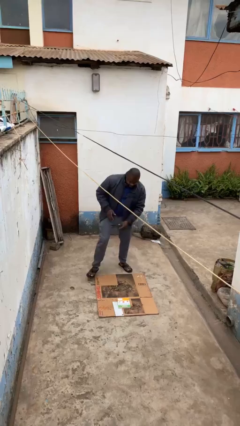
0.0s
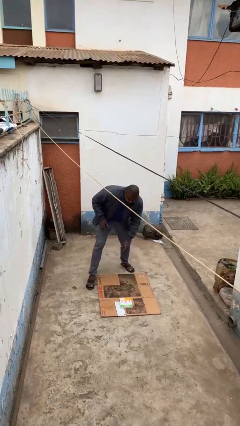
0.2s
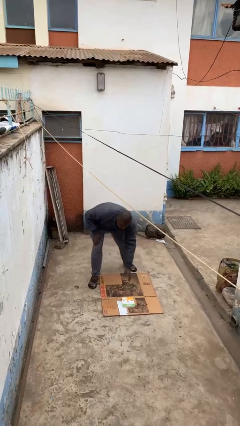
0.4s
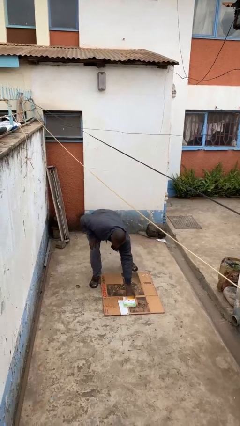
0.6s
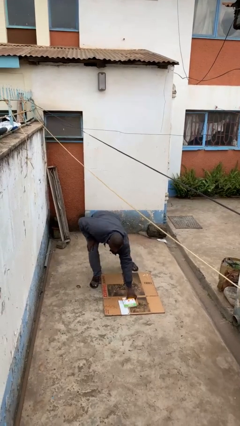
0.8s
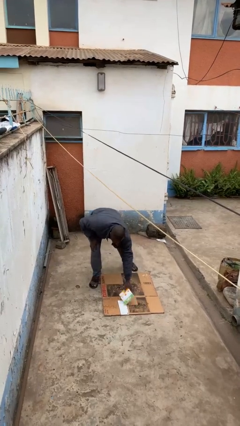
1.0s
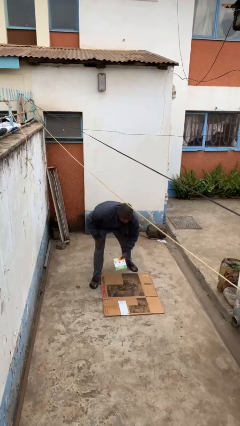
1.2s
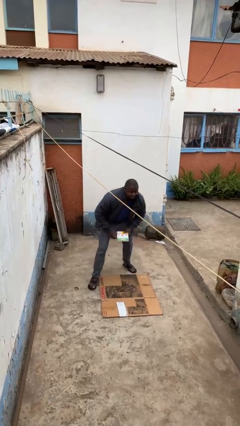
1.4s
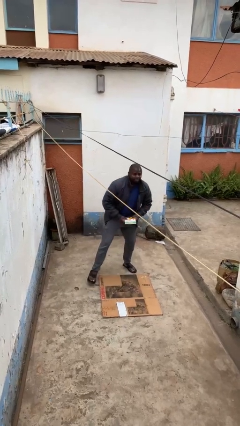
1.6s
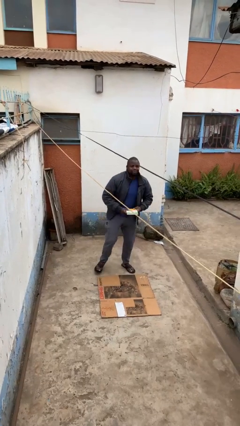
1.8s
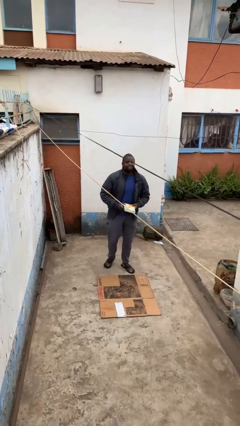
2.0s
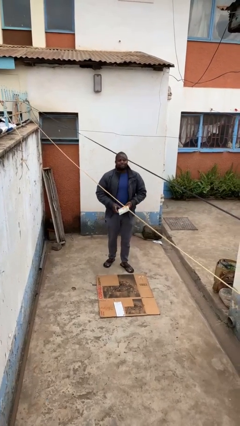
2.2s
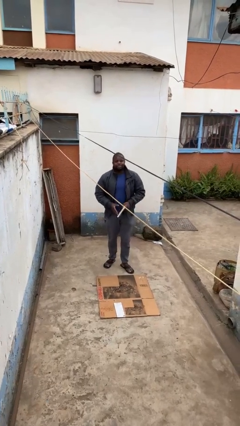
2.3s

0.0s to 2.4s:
person picks up object from floor

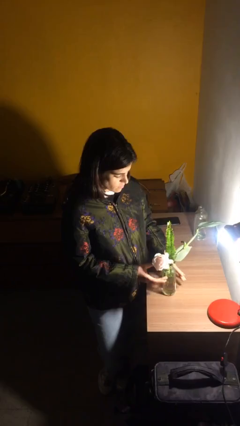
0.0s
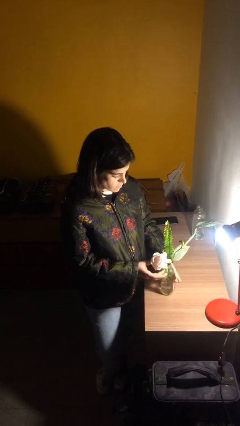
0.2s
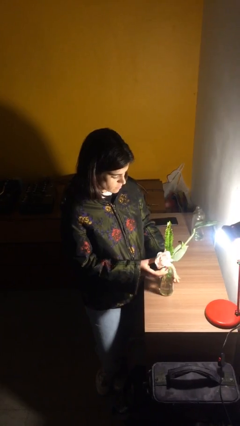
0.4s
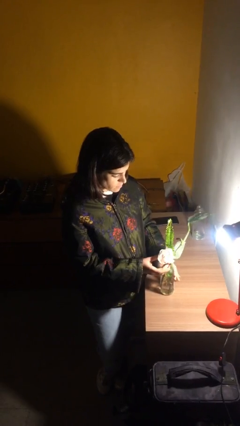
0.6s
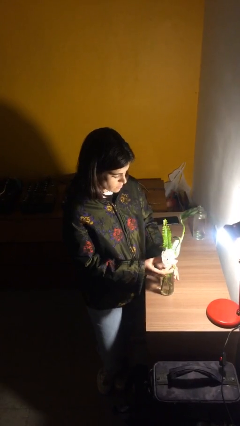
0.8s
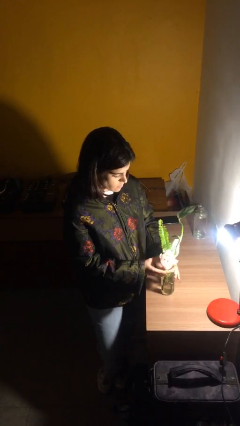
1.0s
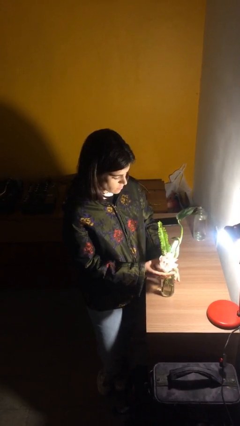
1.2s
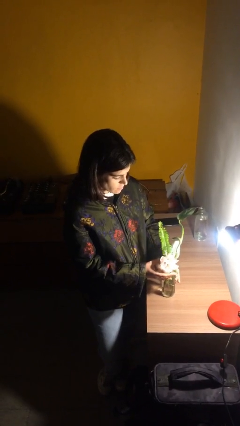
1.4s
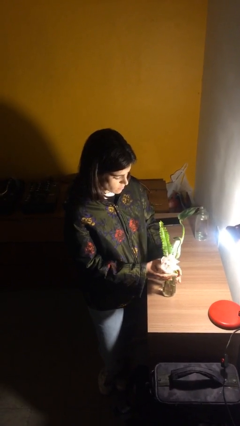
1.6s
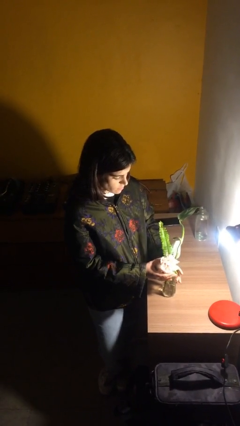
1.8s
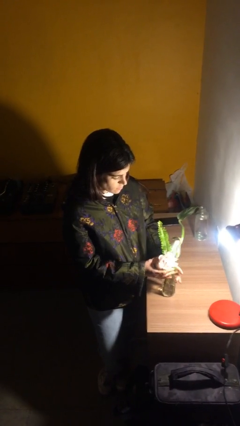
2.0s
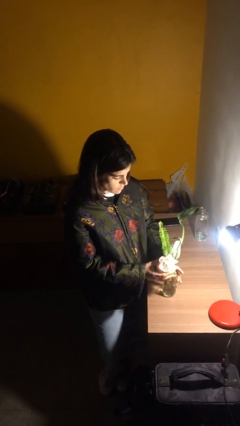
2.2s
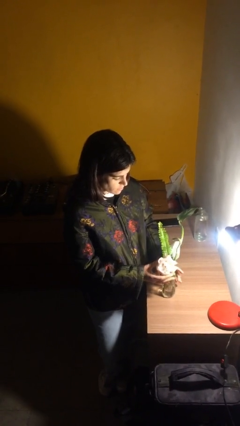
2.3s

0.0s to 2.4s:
person arranges flowers in vase

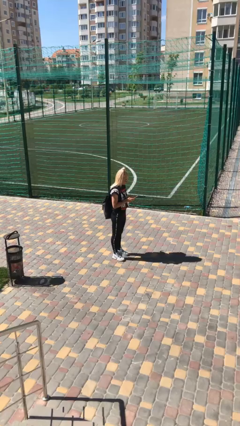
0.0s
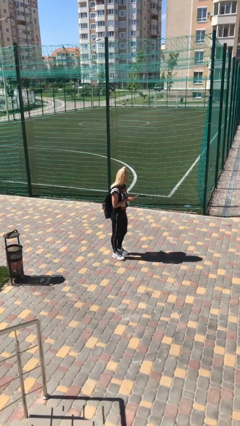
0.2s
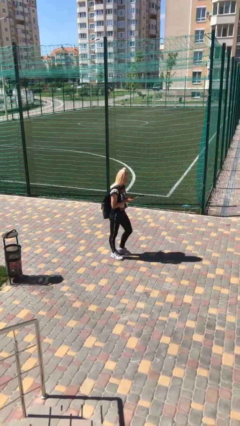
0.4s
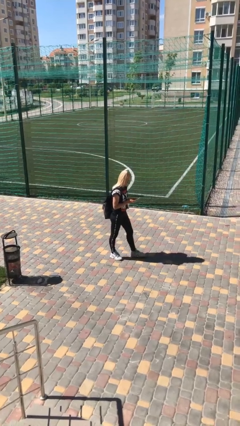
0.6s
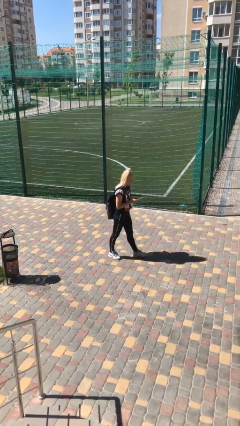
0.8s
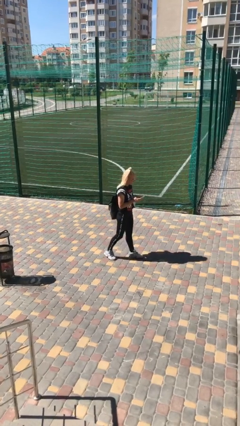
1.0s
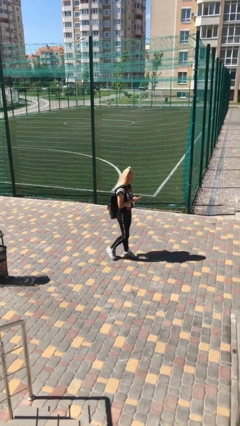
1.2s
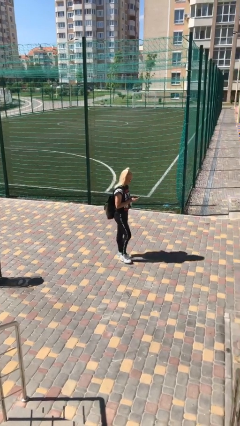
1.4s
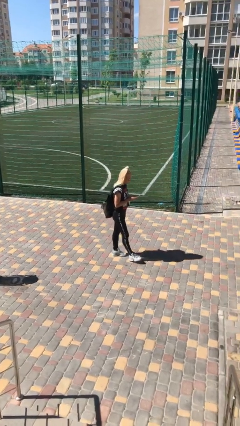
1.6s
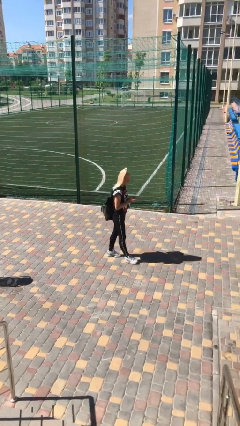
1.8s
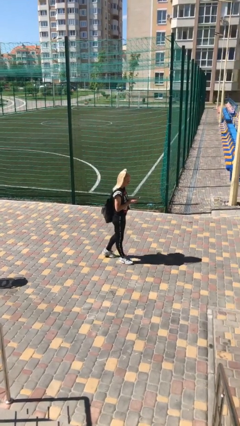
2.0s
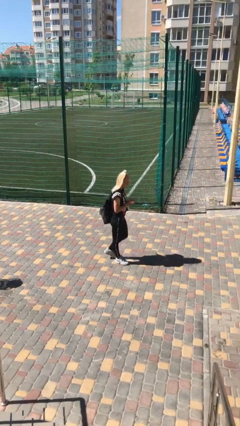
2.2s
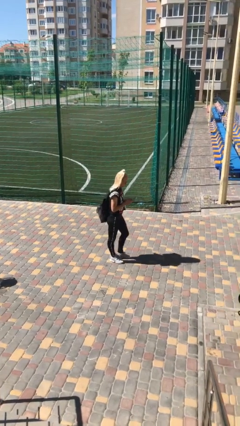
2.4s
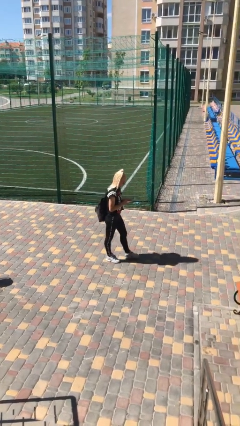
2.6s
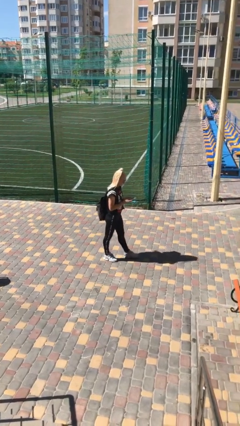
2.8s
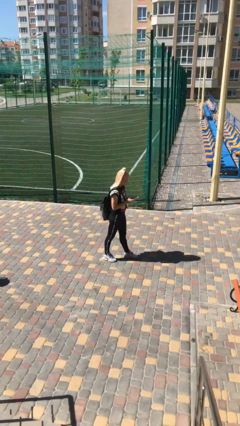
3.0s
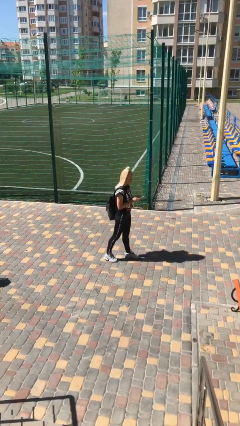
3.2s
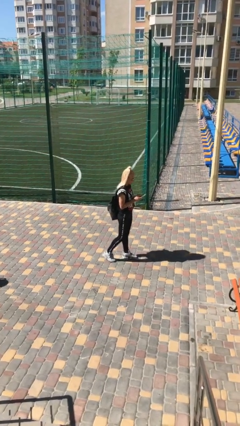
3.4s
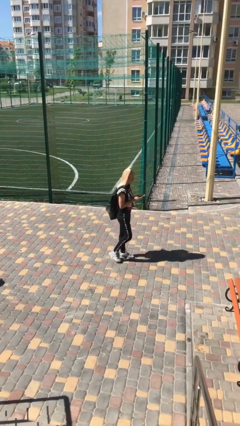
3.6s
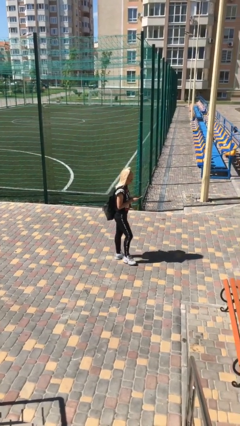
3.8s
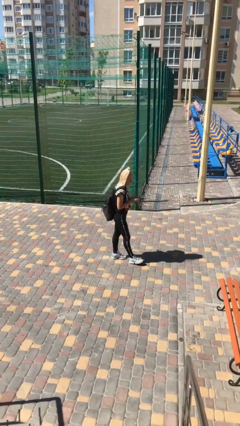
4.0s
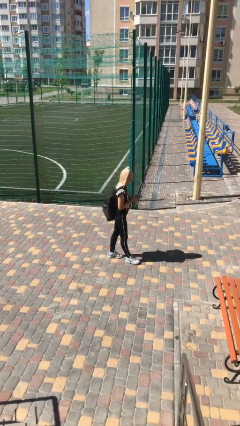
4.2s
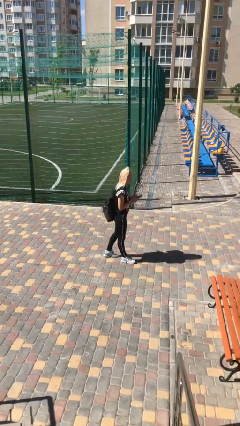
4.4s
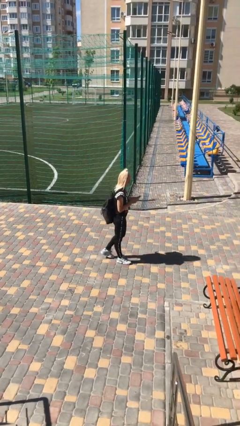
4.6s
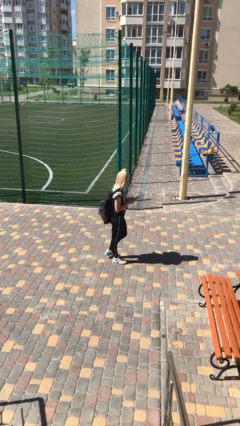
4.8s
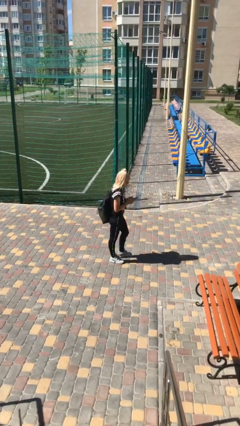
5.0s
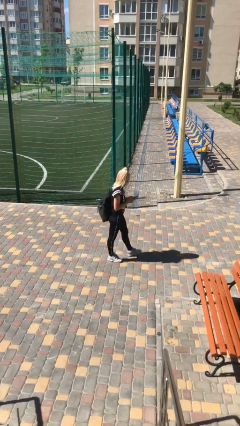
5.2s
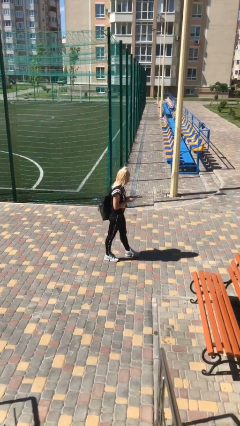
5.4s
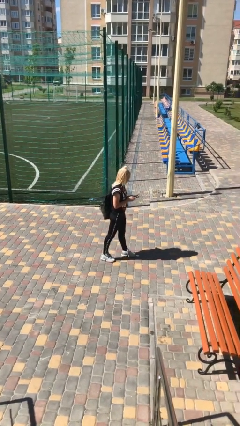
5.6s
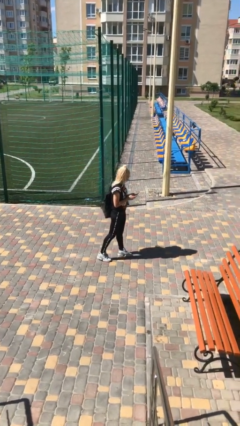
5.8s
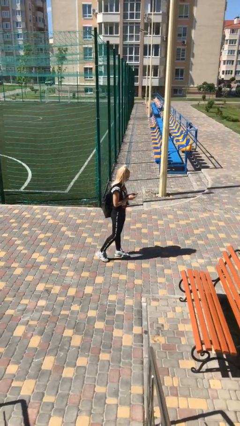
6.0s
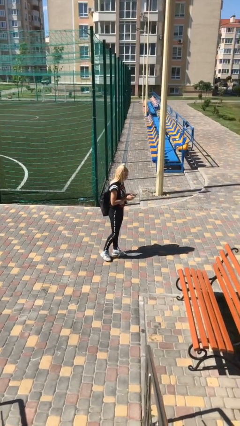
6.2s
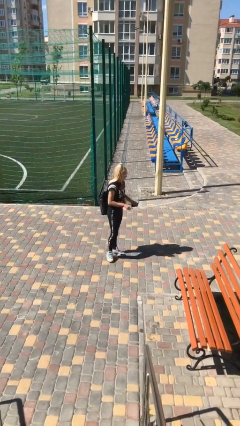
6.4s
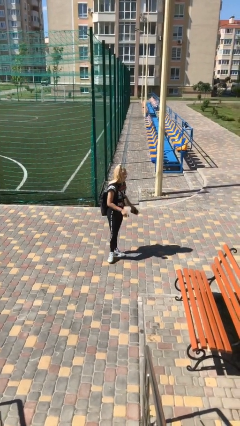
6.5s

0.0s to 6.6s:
person texts on phone

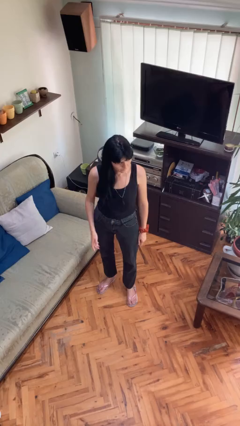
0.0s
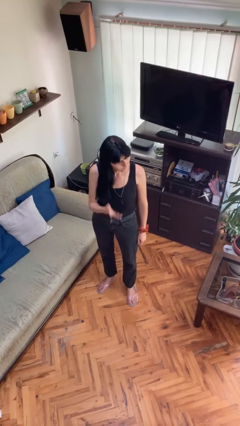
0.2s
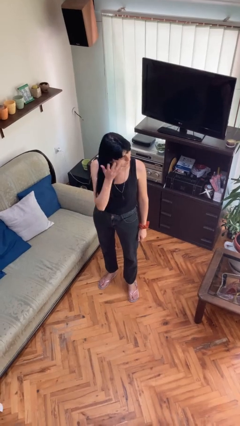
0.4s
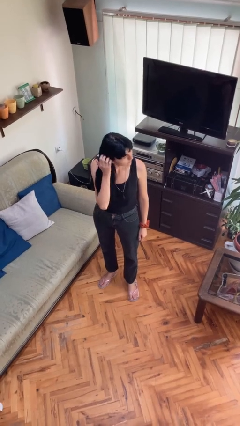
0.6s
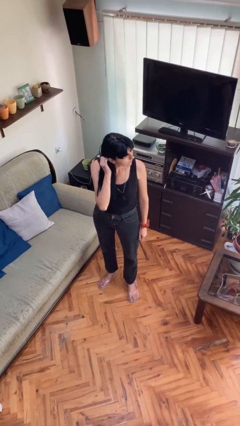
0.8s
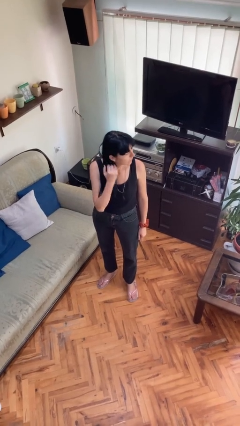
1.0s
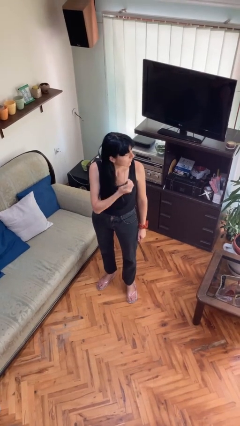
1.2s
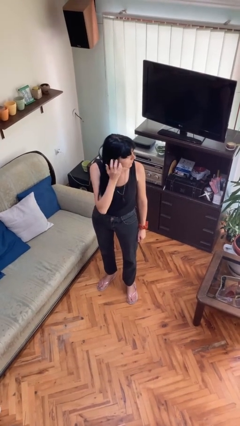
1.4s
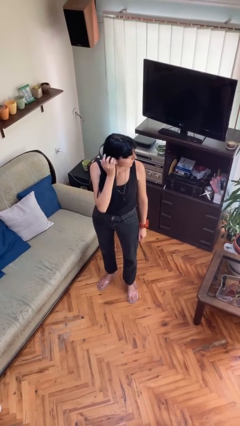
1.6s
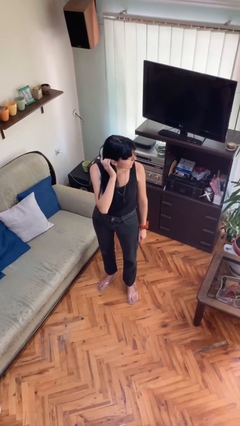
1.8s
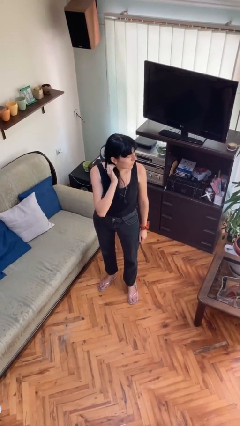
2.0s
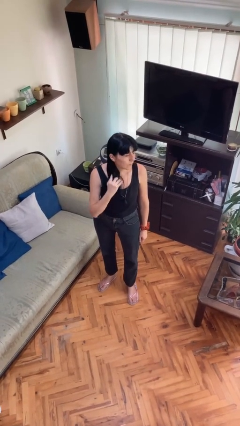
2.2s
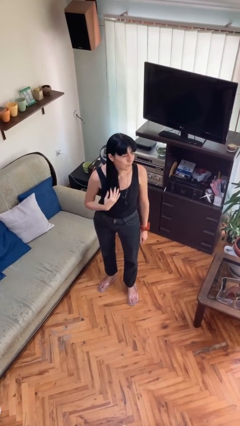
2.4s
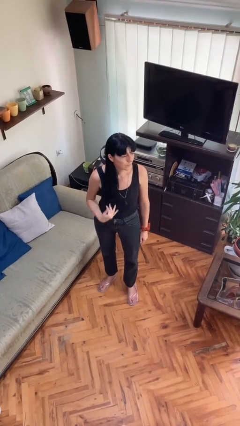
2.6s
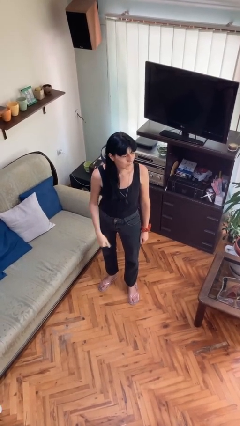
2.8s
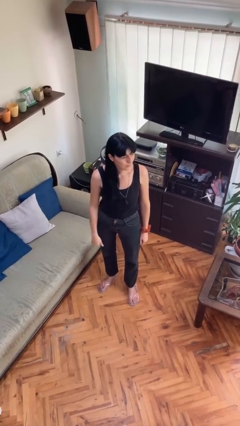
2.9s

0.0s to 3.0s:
person strokes hair

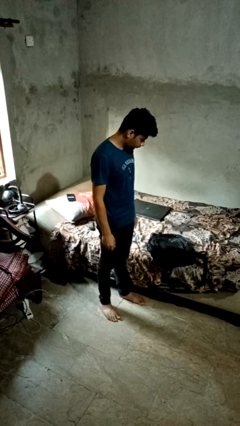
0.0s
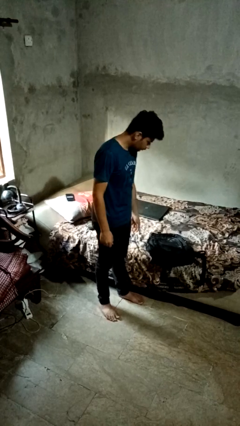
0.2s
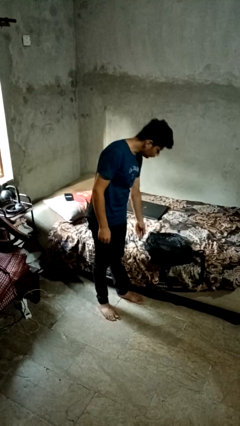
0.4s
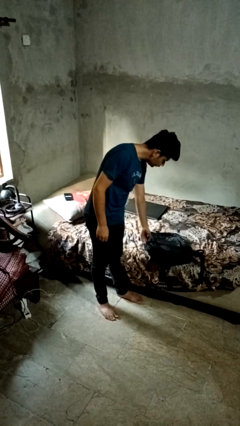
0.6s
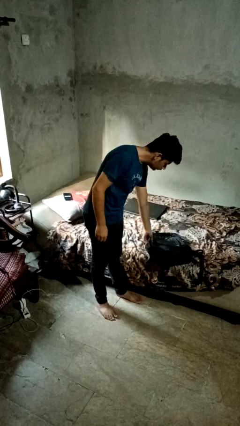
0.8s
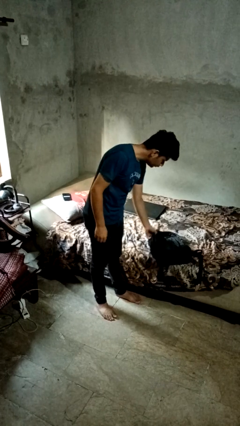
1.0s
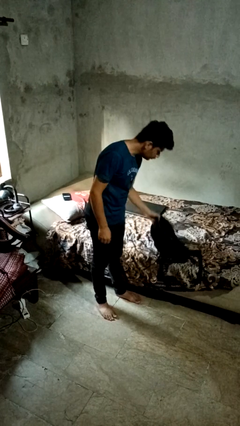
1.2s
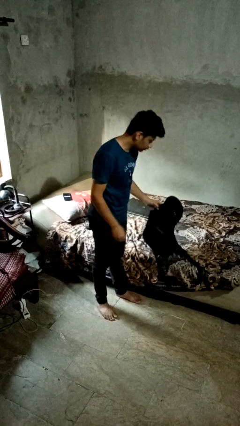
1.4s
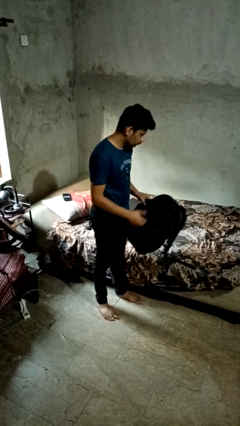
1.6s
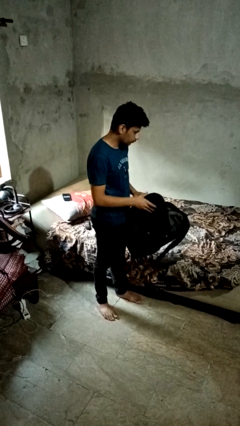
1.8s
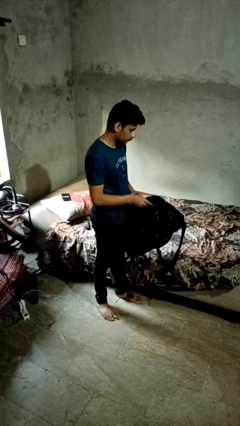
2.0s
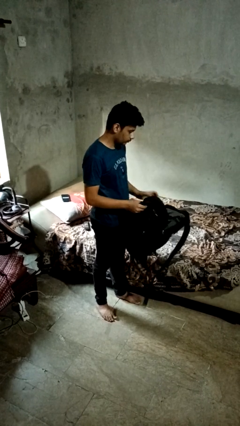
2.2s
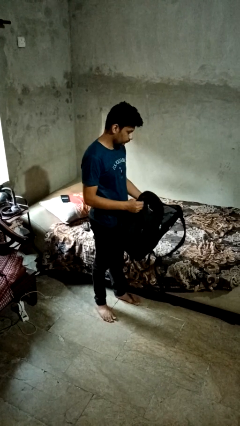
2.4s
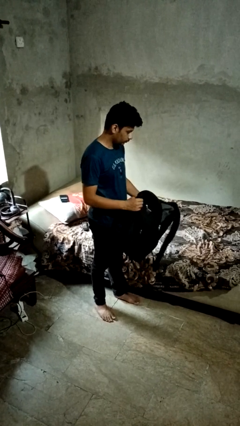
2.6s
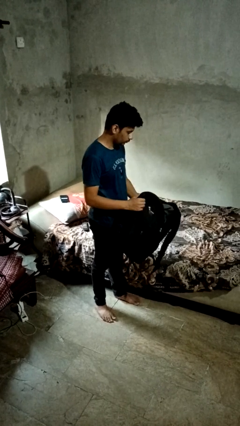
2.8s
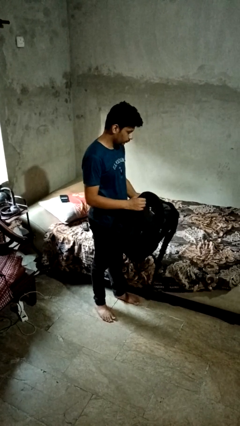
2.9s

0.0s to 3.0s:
person picks up object from bed

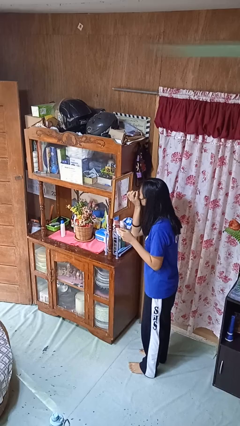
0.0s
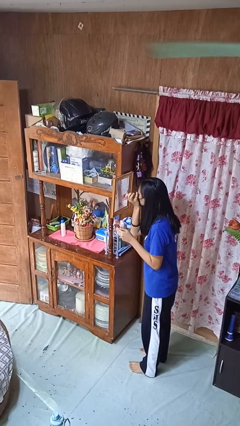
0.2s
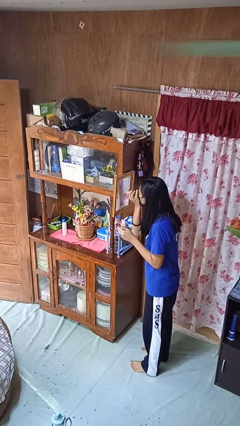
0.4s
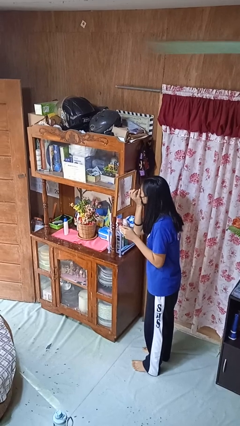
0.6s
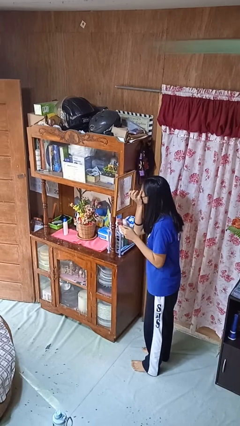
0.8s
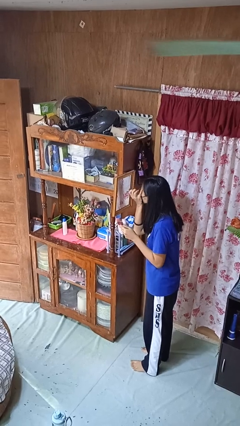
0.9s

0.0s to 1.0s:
person applies eye makeup
